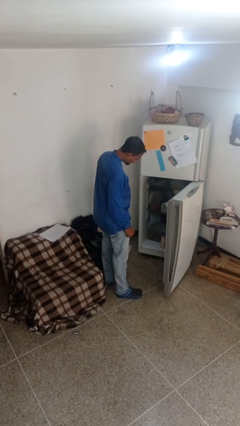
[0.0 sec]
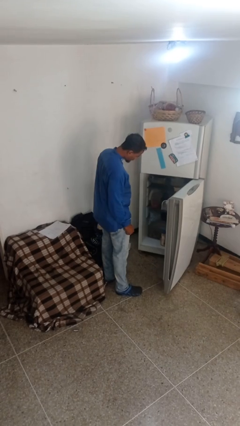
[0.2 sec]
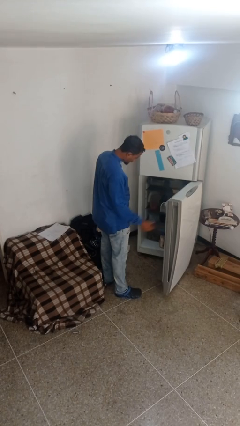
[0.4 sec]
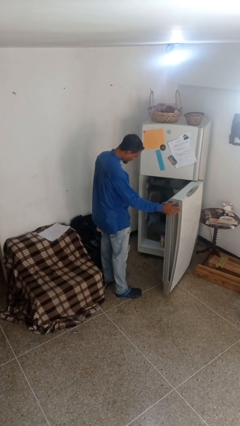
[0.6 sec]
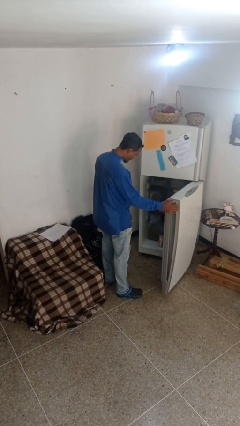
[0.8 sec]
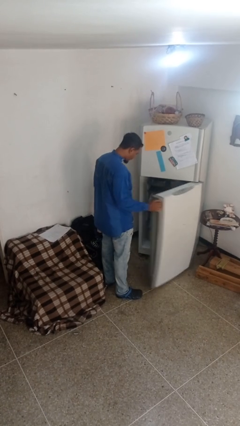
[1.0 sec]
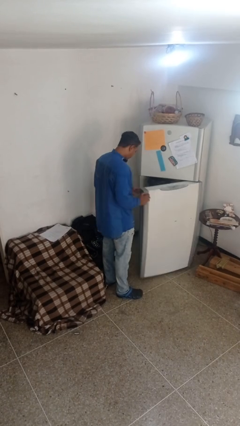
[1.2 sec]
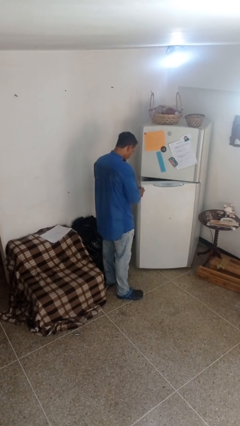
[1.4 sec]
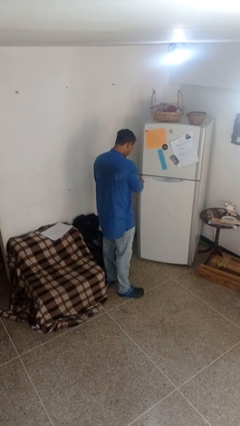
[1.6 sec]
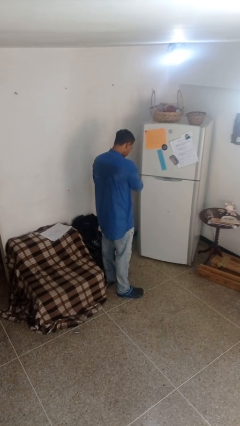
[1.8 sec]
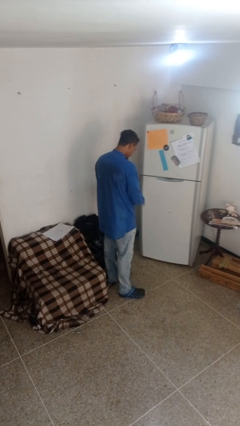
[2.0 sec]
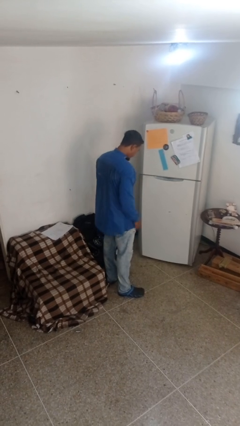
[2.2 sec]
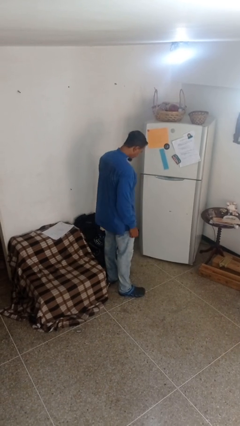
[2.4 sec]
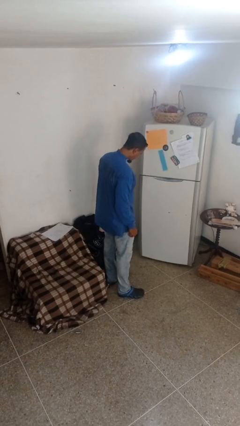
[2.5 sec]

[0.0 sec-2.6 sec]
person closes refrigerator

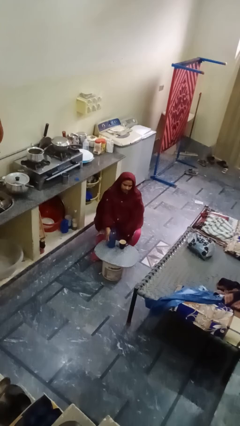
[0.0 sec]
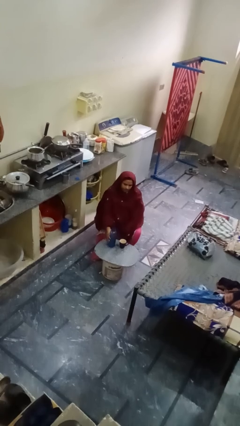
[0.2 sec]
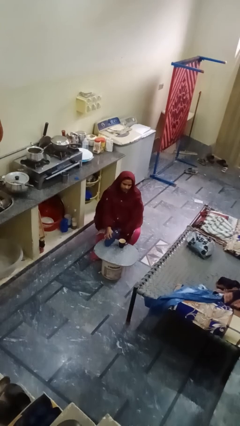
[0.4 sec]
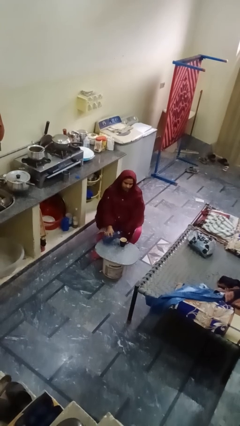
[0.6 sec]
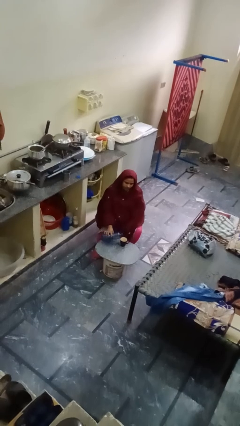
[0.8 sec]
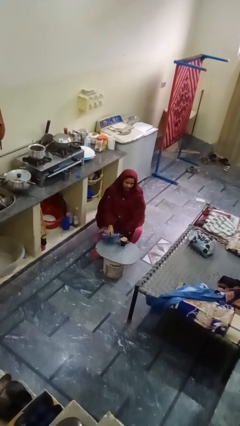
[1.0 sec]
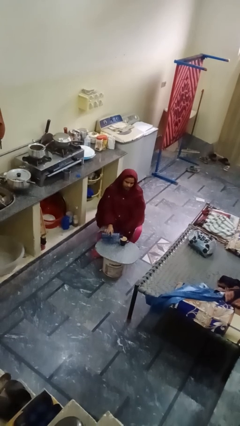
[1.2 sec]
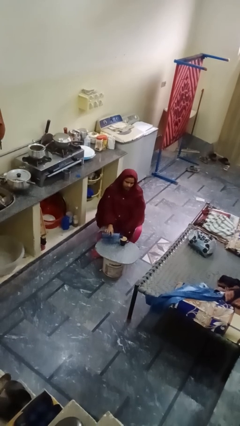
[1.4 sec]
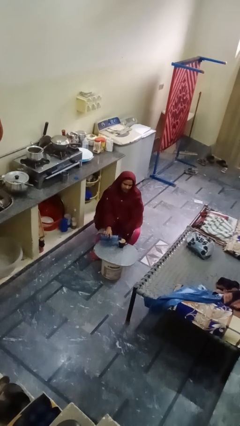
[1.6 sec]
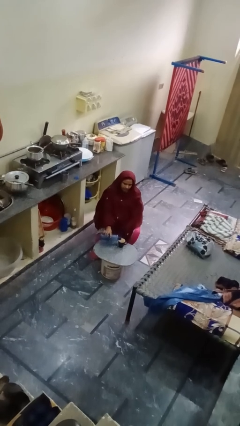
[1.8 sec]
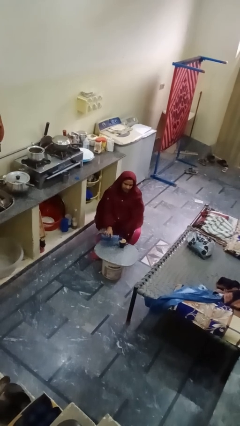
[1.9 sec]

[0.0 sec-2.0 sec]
person pours liquid into cup

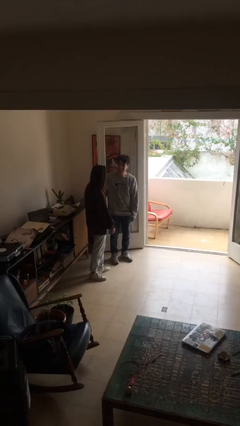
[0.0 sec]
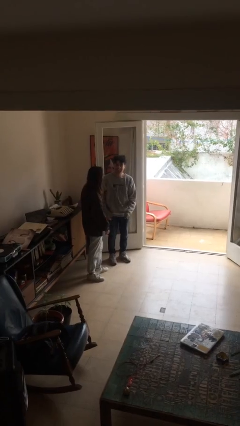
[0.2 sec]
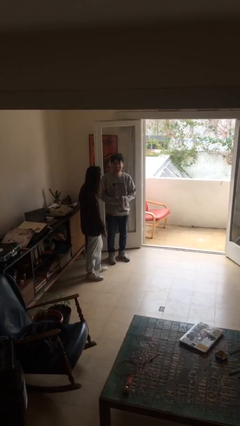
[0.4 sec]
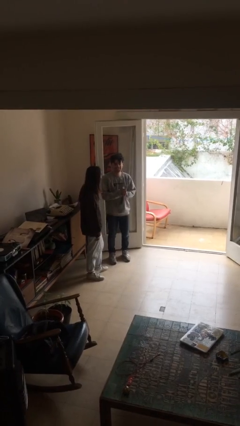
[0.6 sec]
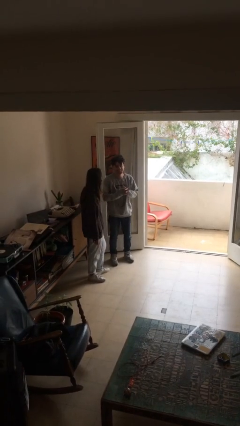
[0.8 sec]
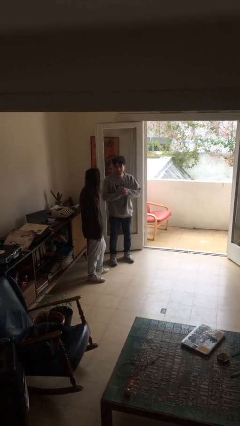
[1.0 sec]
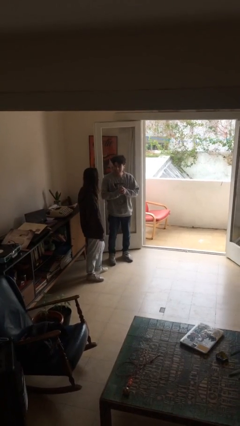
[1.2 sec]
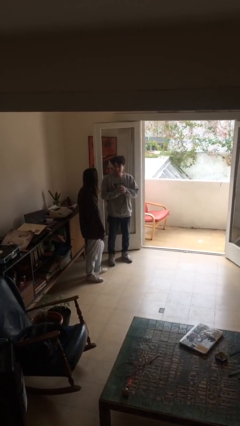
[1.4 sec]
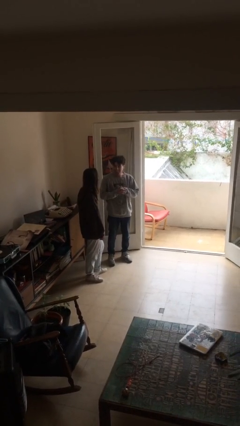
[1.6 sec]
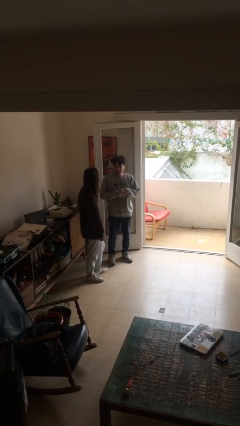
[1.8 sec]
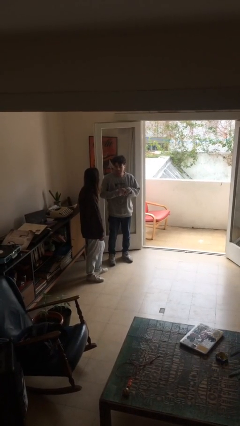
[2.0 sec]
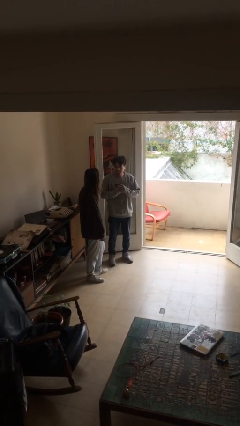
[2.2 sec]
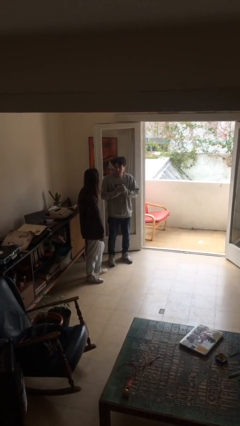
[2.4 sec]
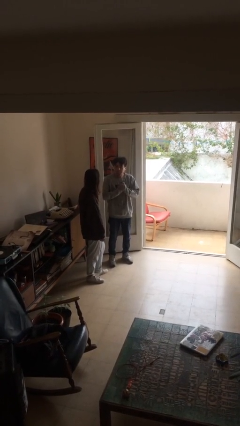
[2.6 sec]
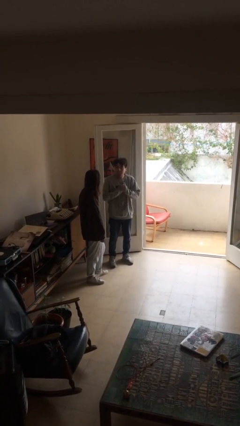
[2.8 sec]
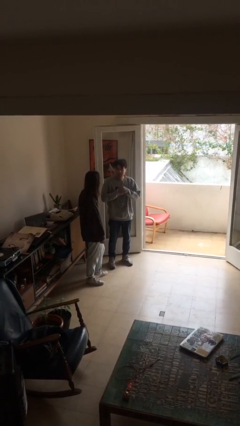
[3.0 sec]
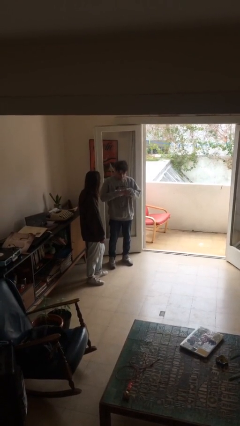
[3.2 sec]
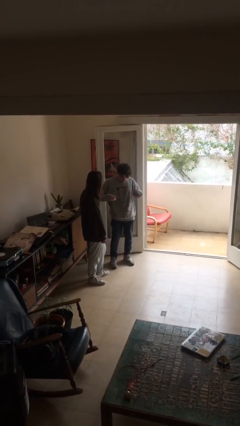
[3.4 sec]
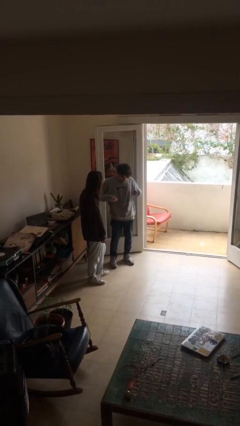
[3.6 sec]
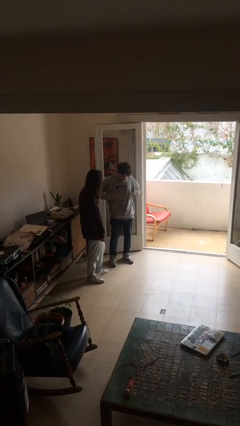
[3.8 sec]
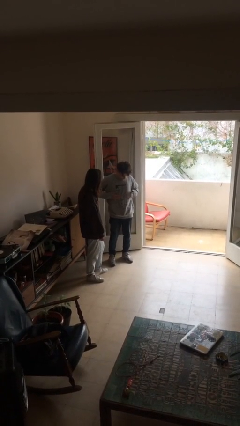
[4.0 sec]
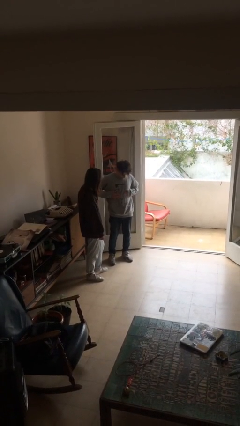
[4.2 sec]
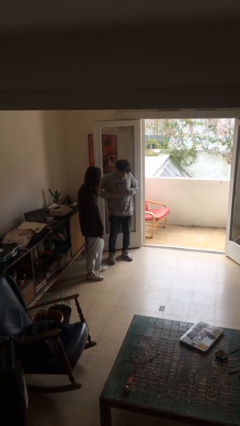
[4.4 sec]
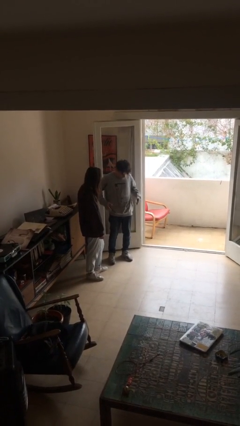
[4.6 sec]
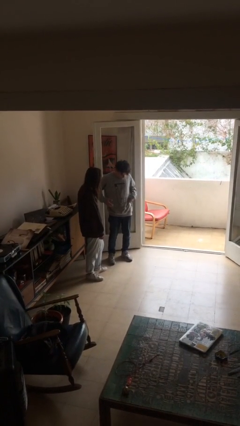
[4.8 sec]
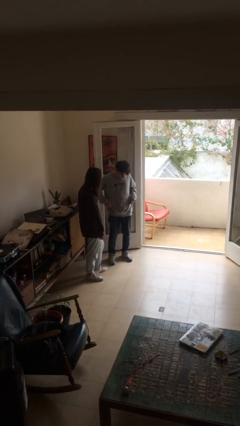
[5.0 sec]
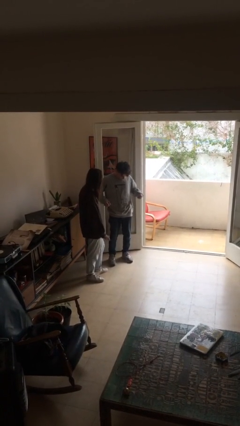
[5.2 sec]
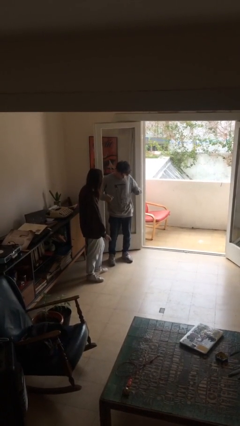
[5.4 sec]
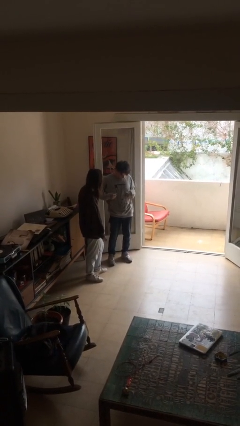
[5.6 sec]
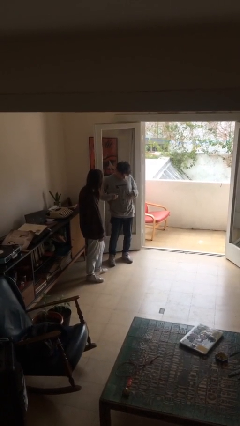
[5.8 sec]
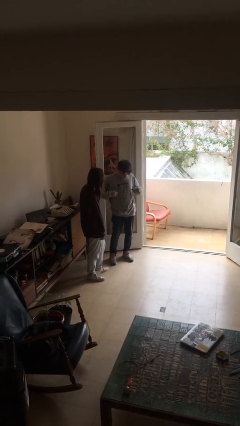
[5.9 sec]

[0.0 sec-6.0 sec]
person talks to person

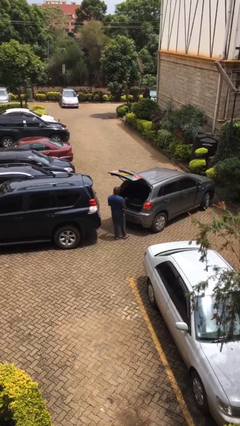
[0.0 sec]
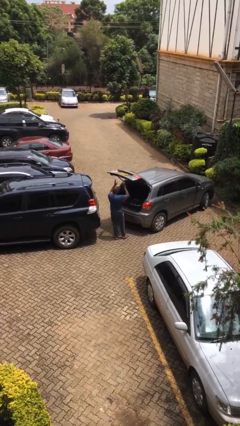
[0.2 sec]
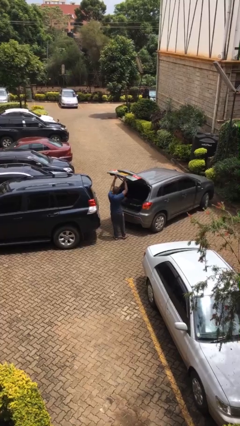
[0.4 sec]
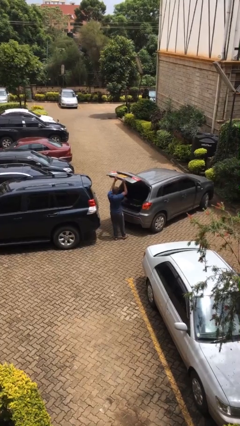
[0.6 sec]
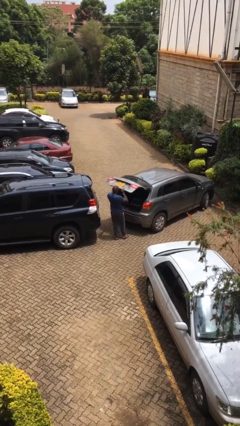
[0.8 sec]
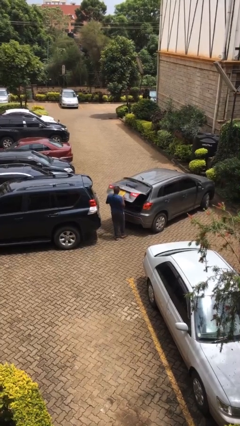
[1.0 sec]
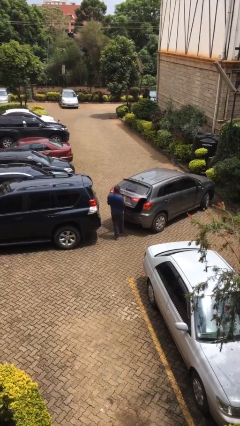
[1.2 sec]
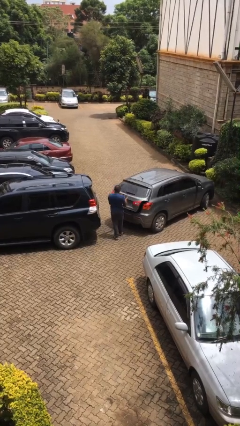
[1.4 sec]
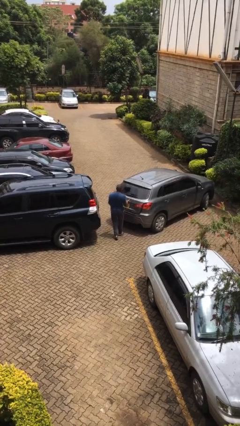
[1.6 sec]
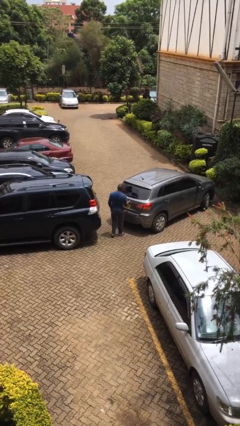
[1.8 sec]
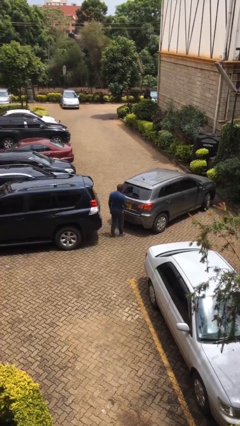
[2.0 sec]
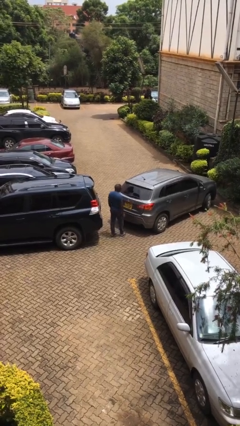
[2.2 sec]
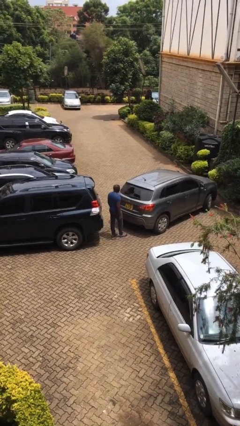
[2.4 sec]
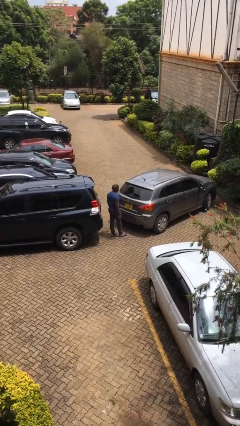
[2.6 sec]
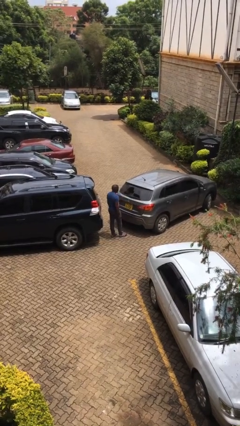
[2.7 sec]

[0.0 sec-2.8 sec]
person closes car trunk

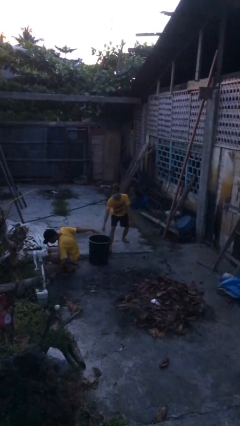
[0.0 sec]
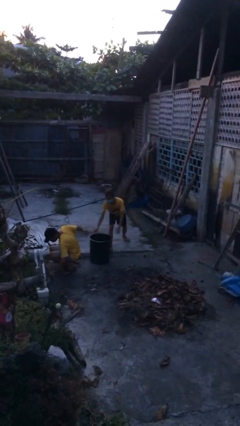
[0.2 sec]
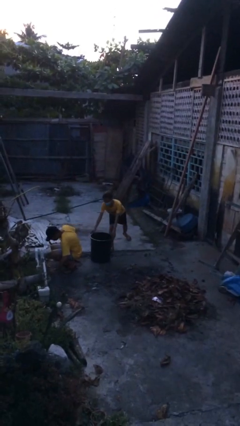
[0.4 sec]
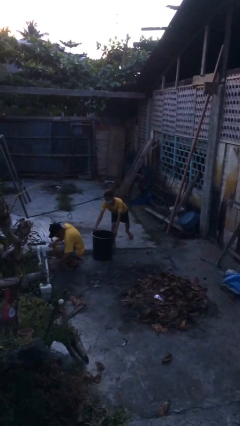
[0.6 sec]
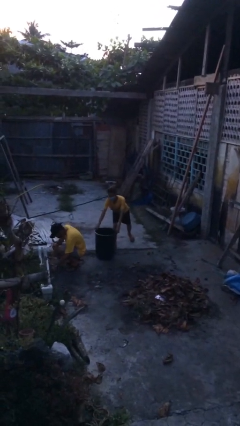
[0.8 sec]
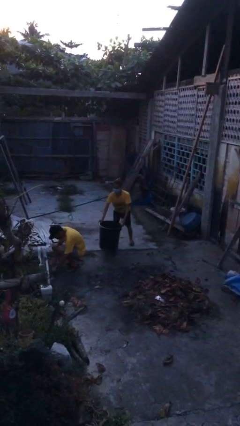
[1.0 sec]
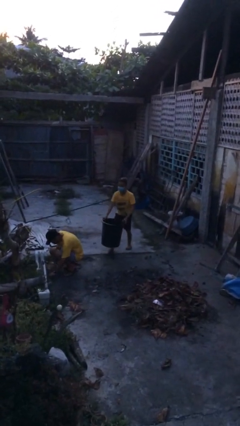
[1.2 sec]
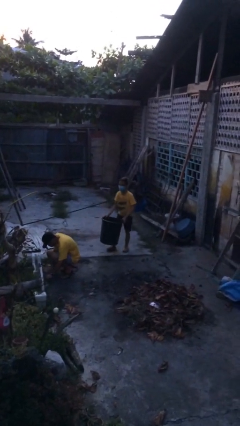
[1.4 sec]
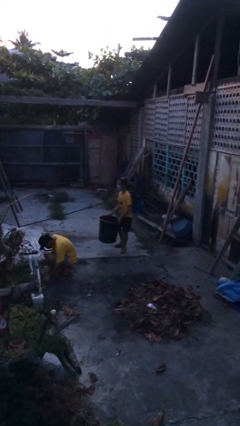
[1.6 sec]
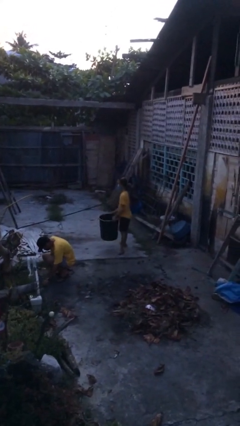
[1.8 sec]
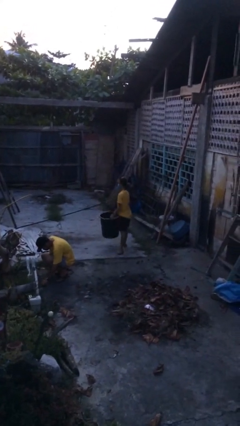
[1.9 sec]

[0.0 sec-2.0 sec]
person steals object from person

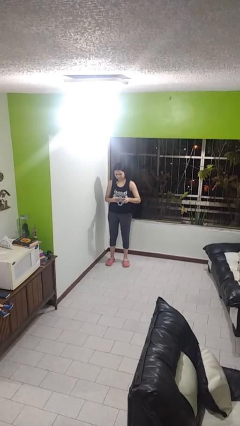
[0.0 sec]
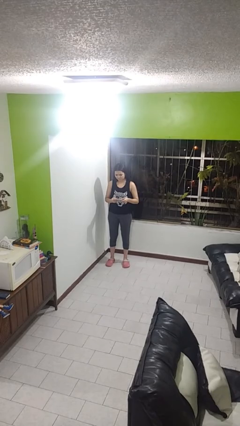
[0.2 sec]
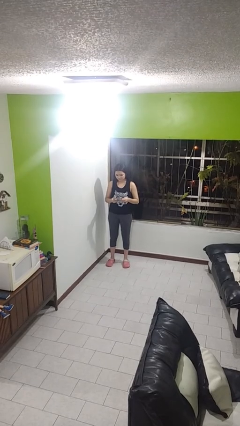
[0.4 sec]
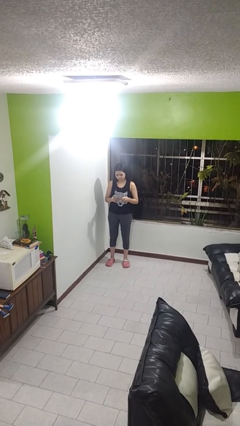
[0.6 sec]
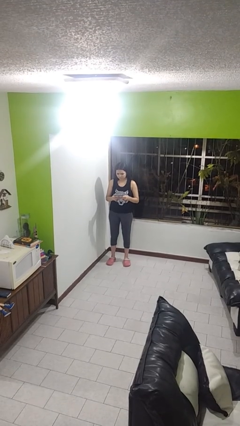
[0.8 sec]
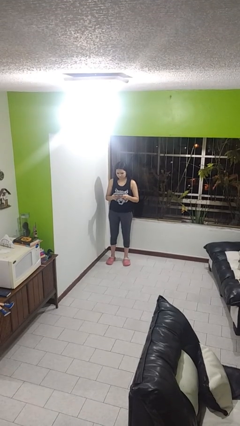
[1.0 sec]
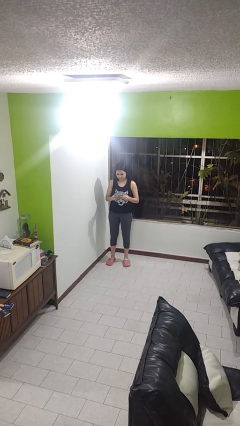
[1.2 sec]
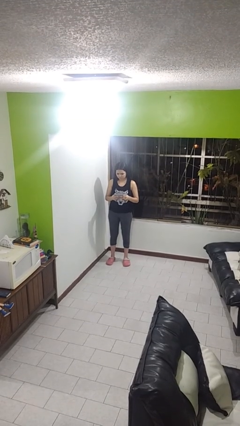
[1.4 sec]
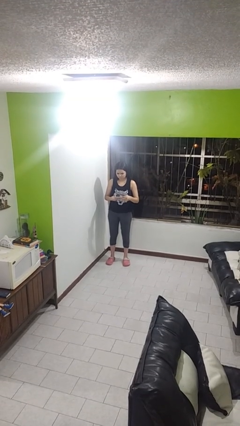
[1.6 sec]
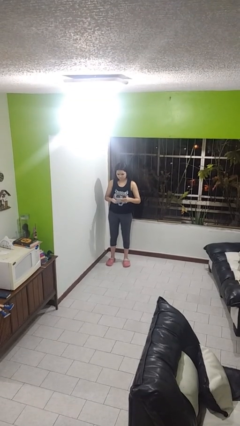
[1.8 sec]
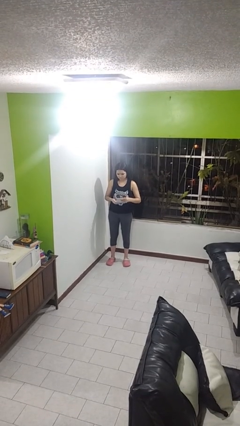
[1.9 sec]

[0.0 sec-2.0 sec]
person interacts with handheld game
